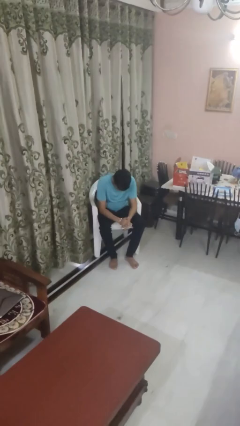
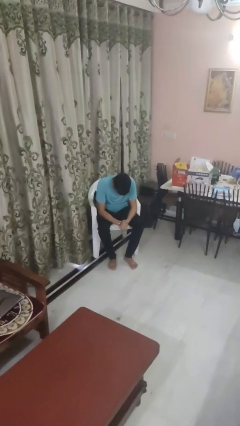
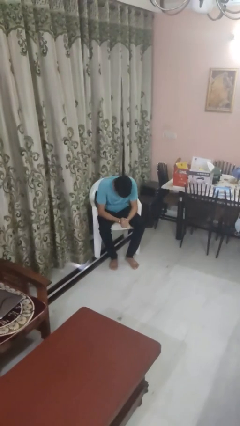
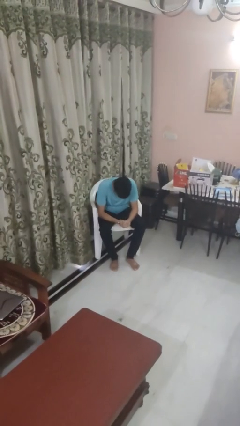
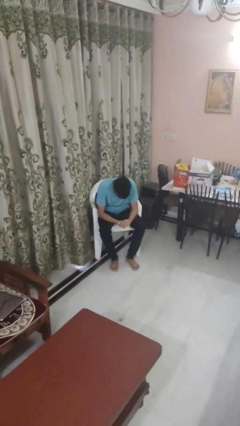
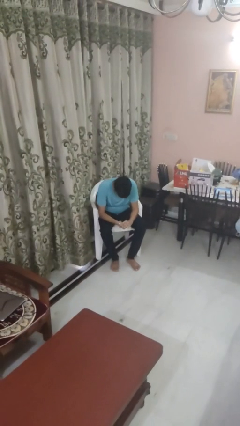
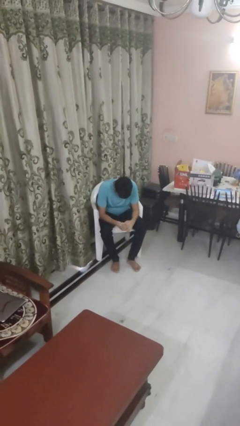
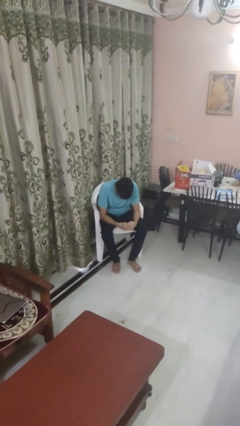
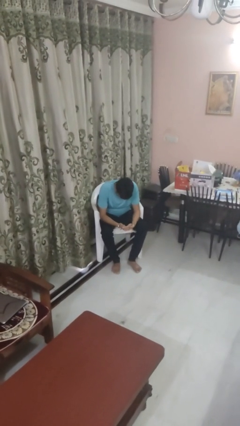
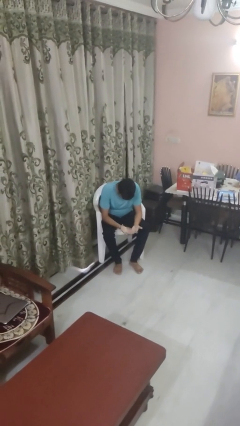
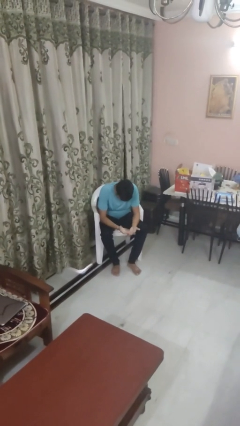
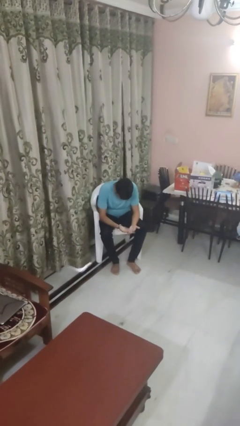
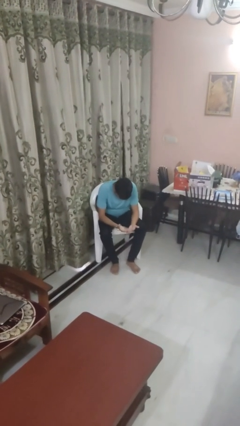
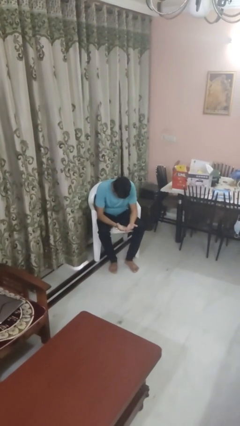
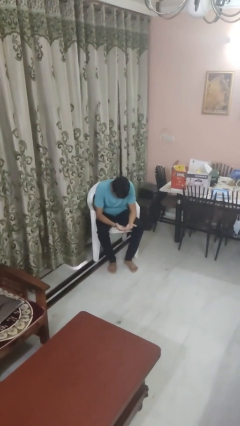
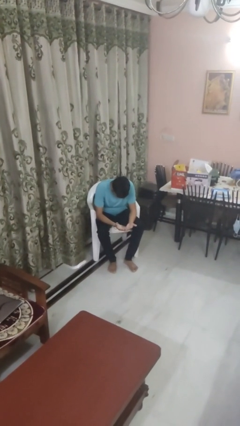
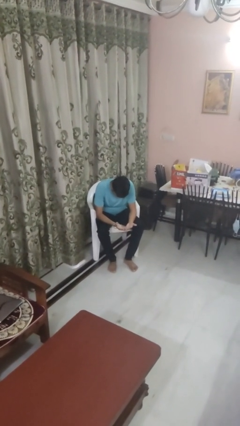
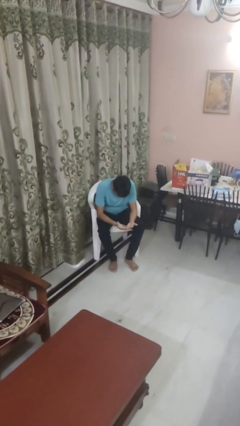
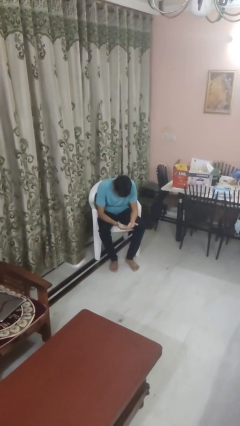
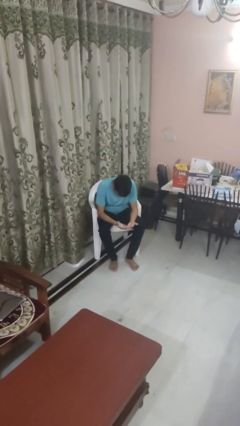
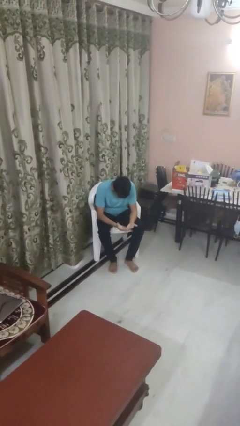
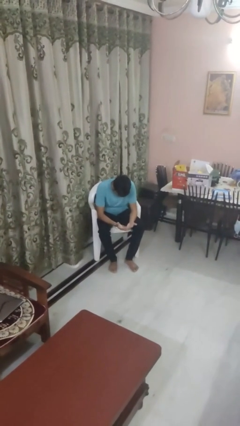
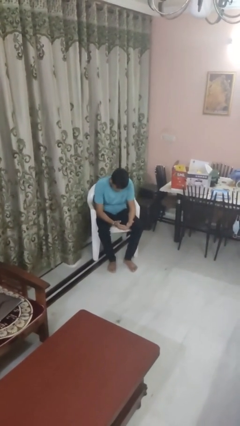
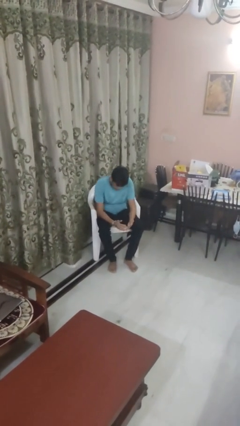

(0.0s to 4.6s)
person looks at hands in lap

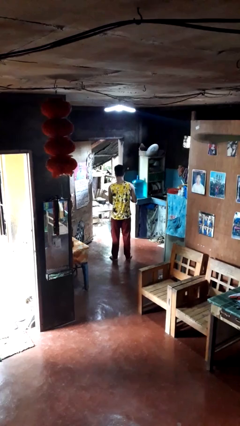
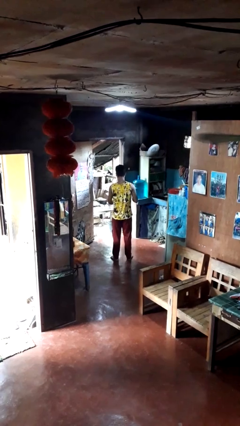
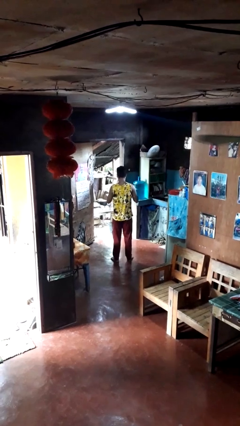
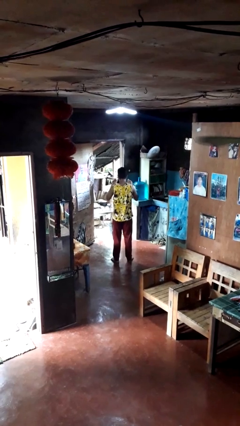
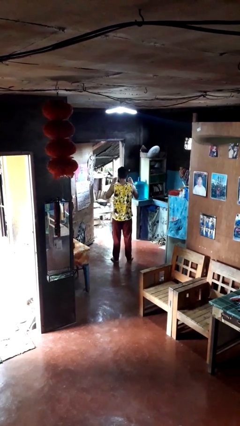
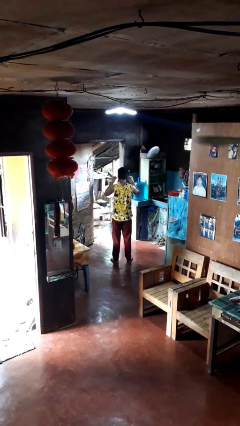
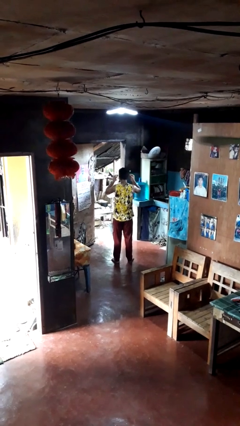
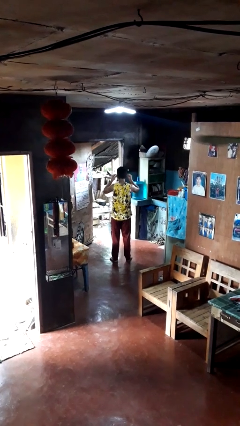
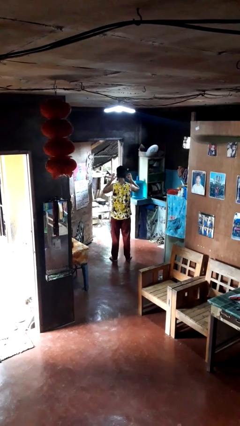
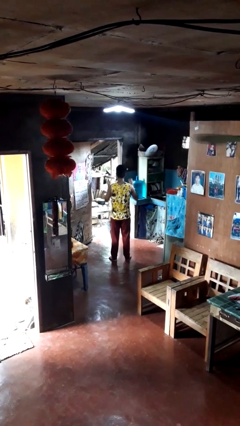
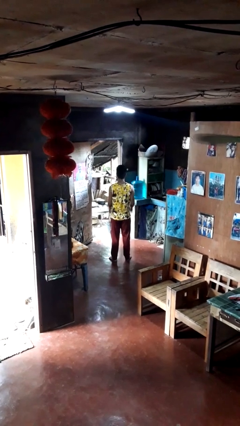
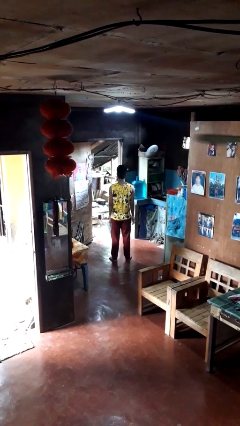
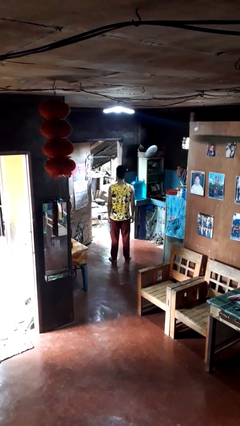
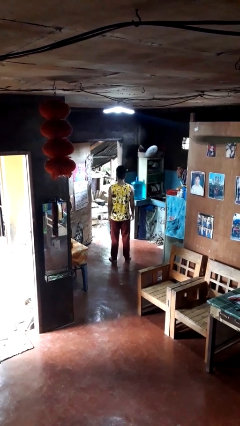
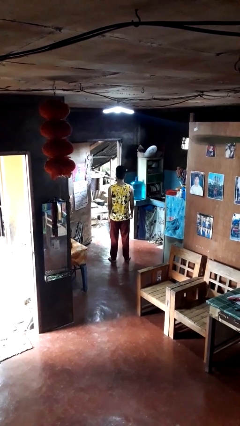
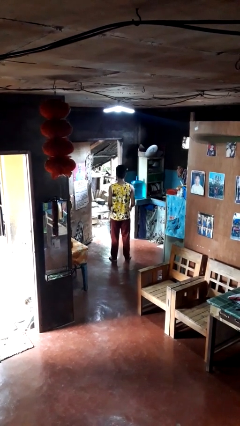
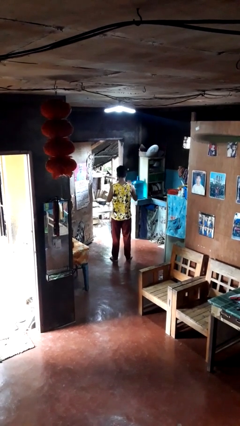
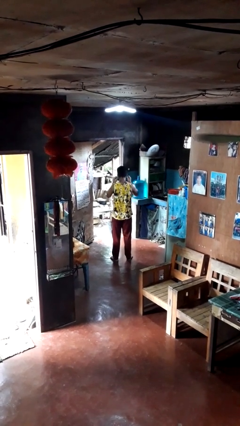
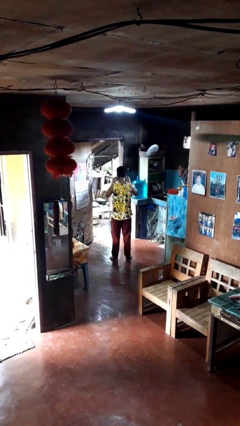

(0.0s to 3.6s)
person puts on facemask

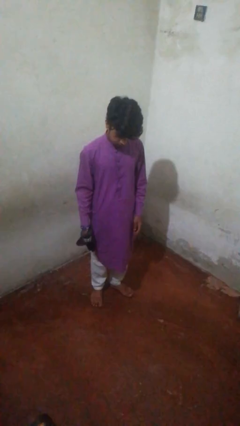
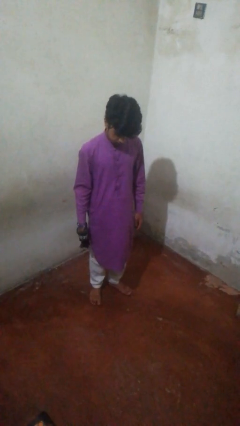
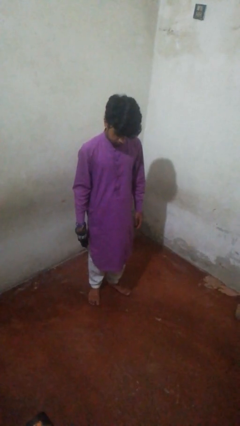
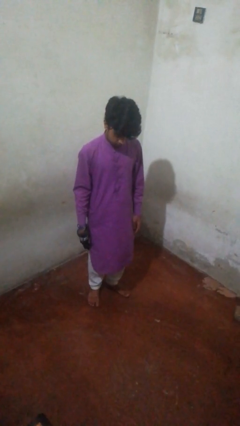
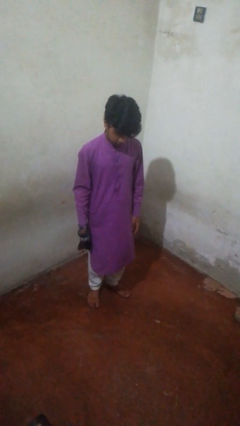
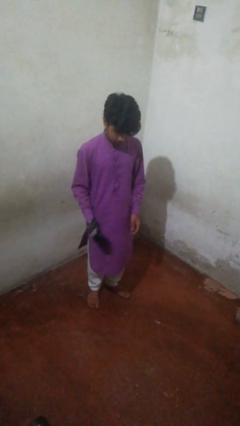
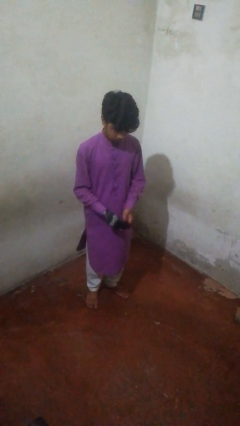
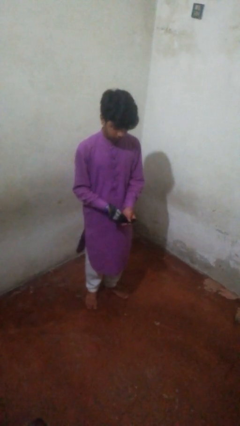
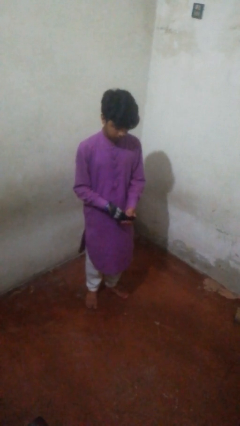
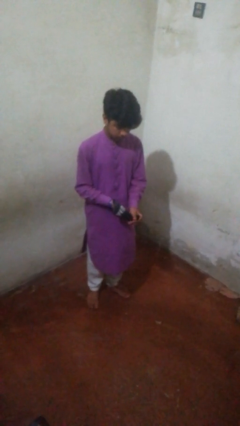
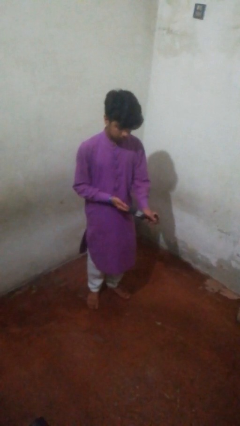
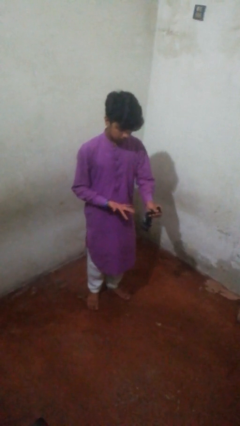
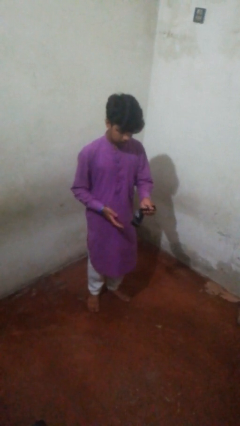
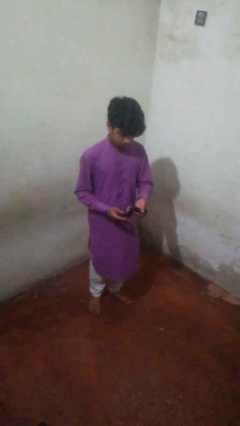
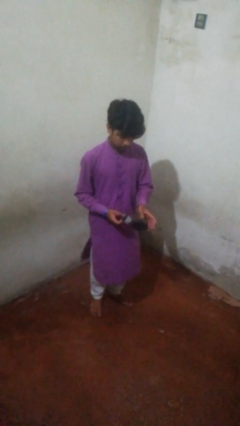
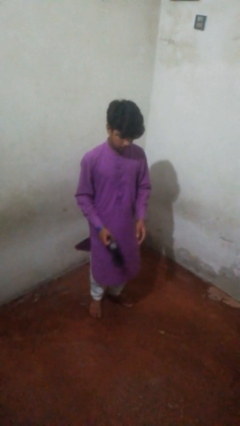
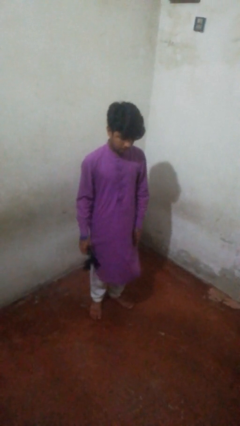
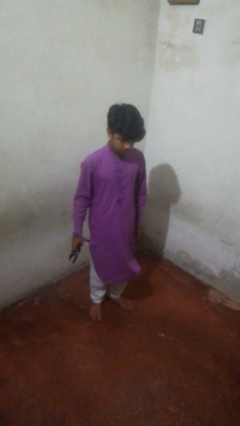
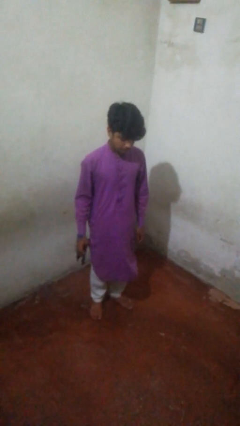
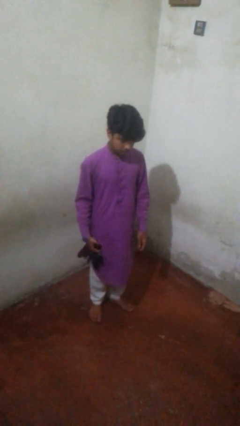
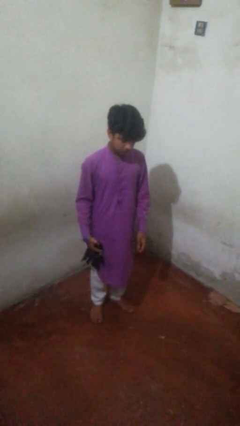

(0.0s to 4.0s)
person takes off gloves

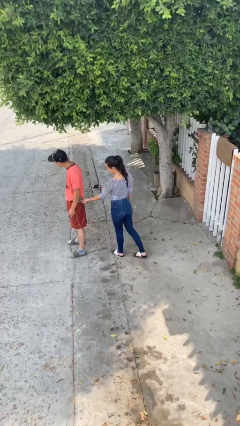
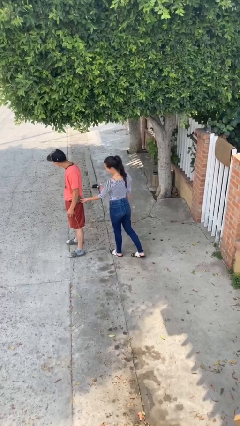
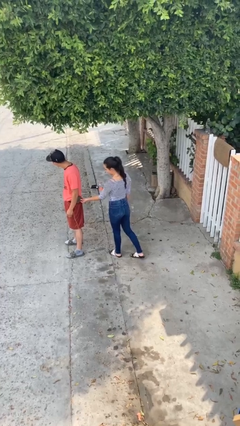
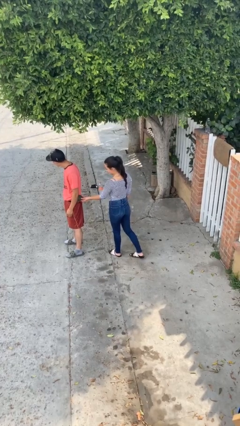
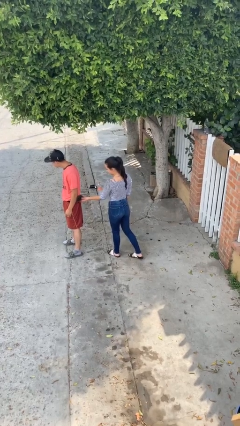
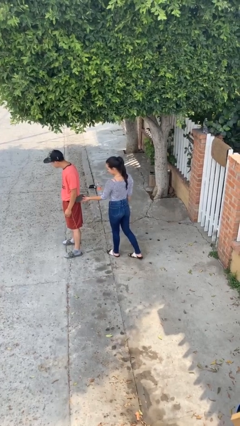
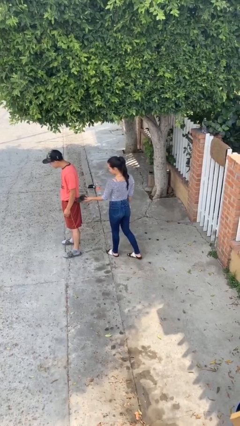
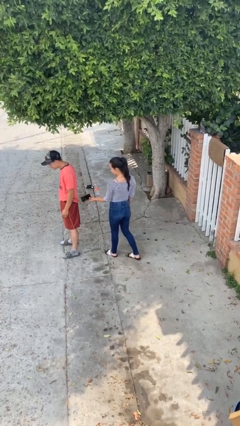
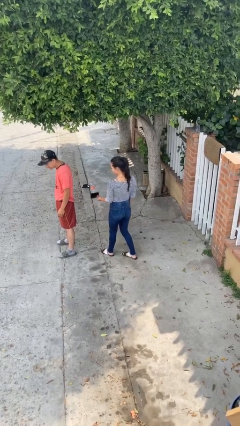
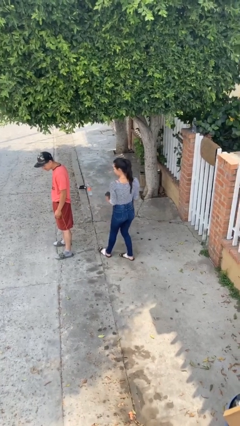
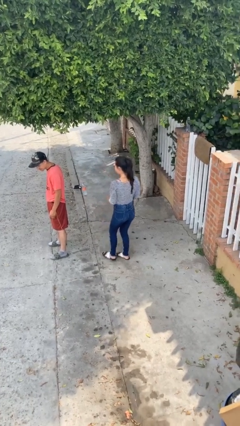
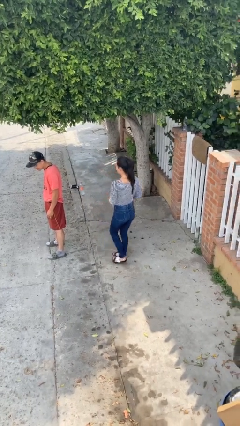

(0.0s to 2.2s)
person steals object from person

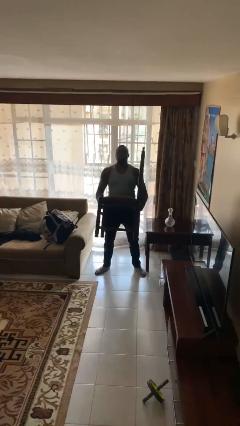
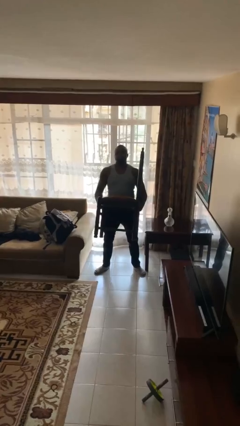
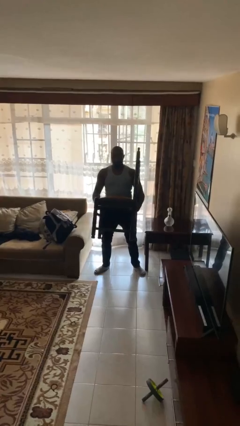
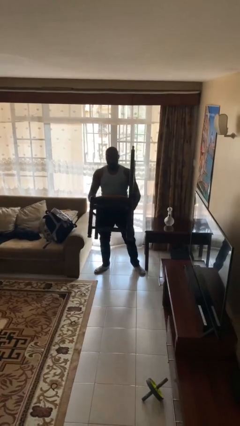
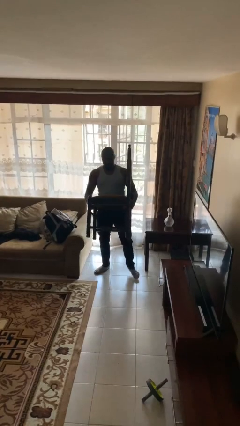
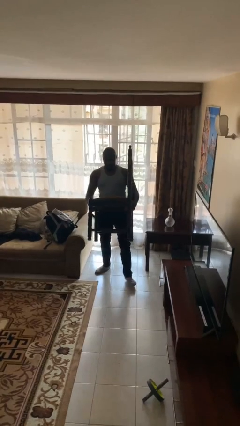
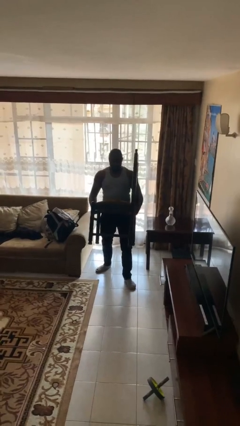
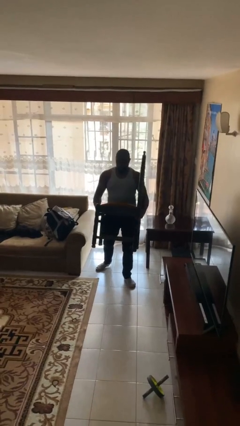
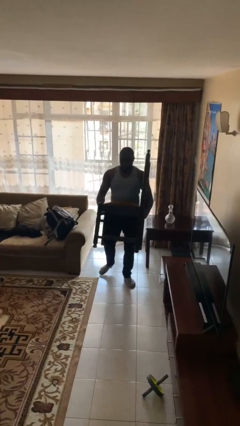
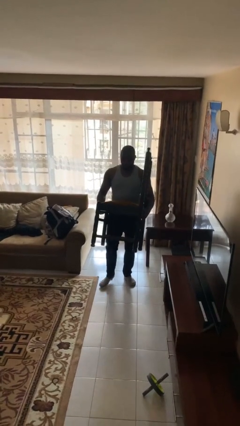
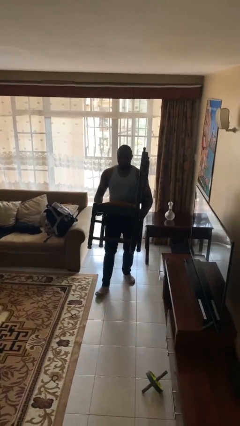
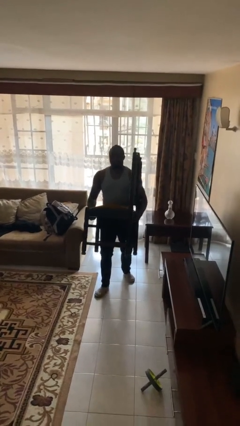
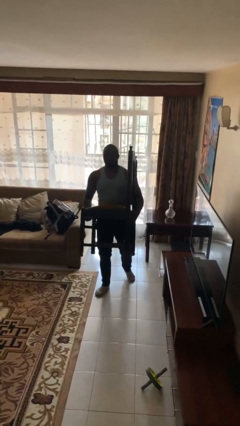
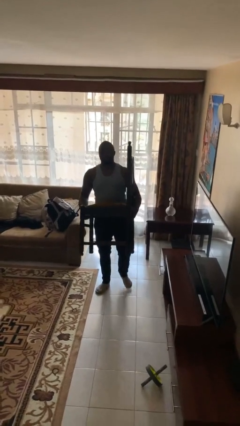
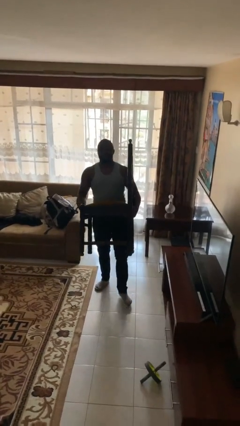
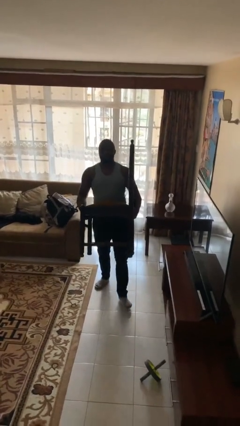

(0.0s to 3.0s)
person carries heavy object

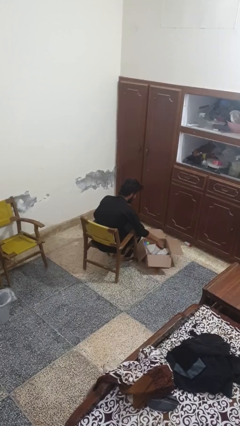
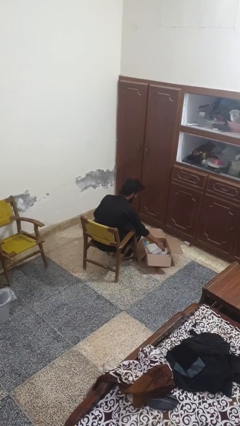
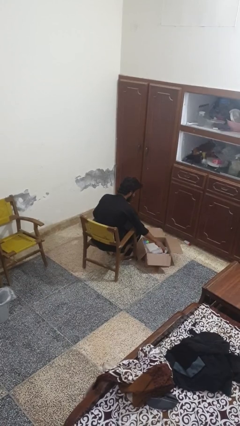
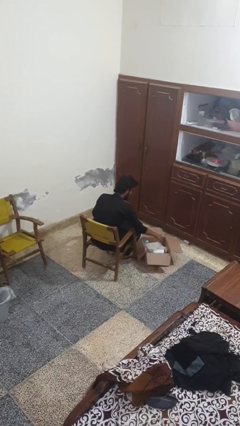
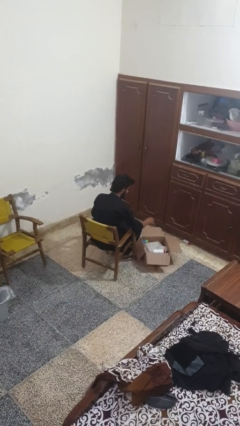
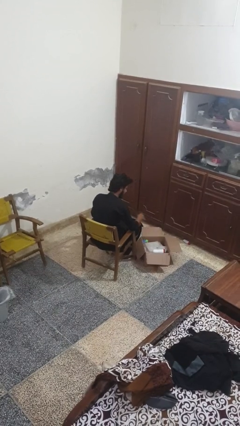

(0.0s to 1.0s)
person puts object into box
